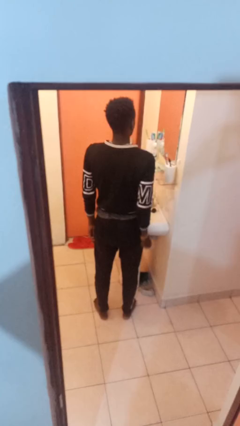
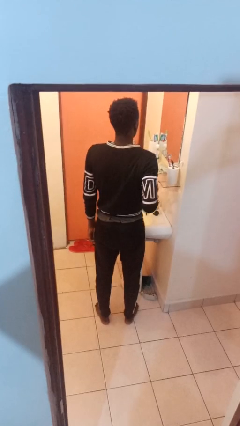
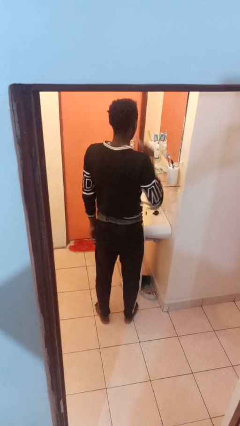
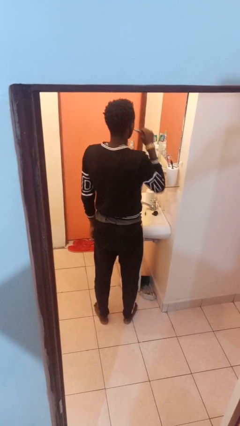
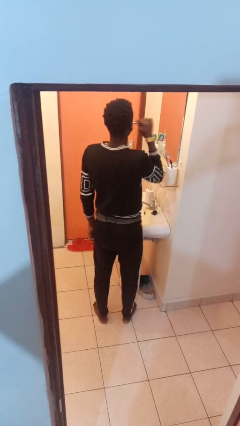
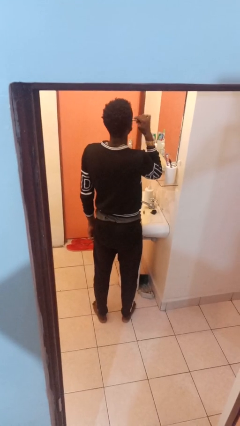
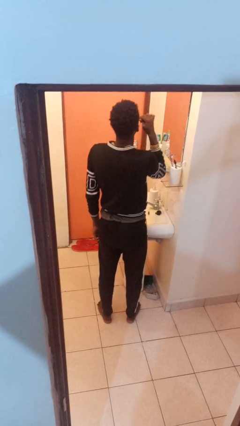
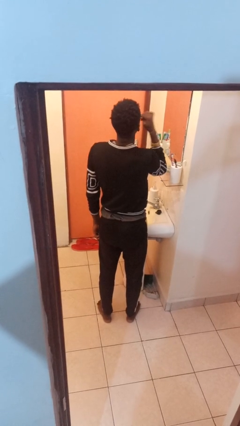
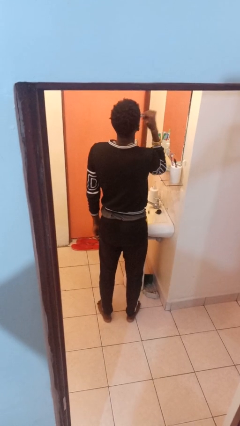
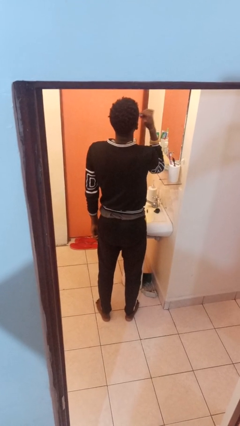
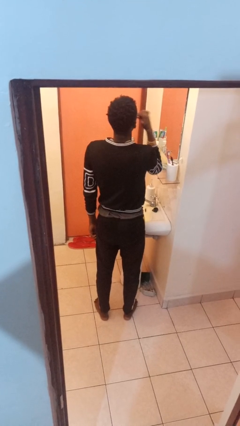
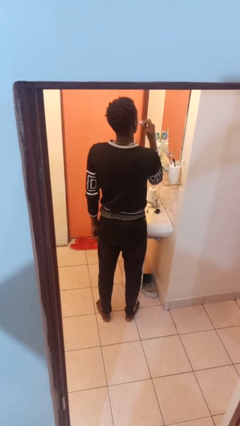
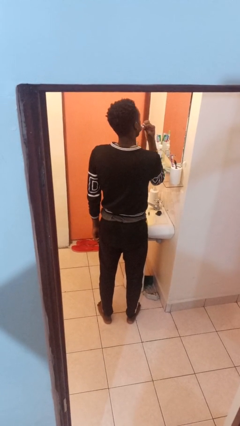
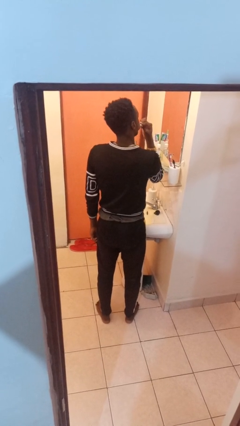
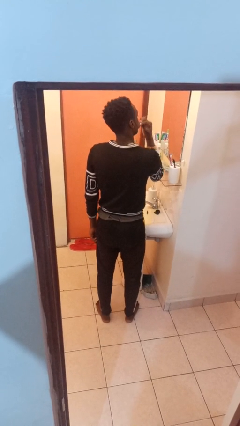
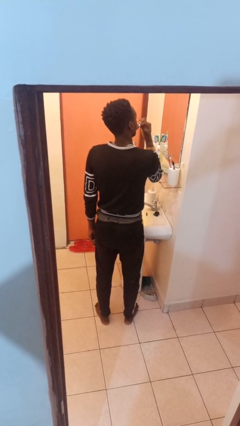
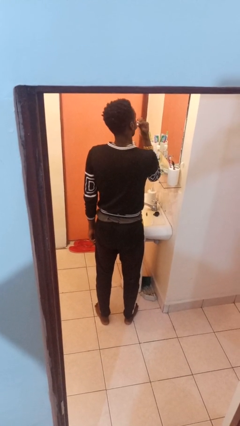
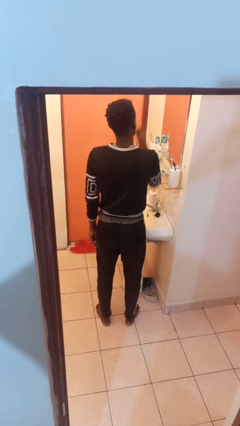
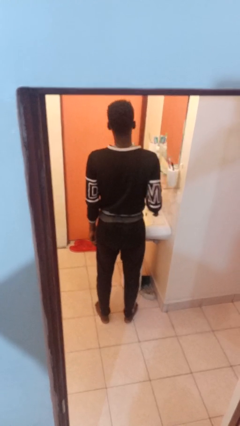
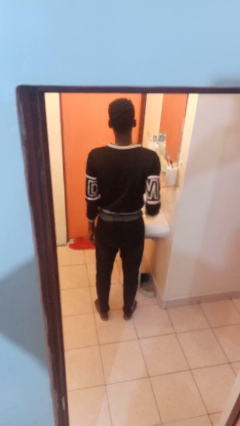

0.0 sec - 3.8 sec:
person brushes teeth

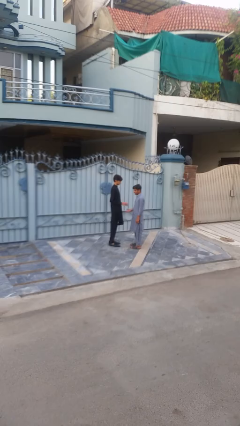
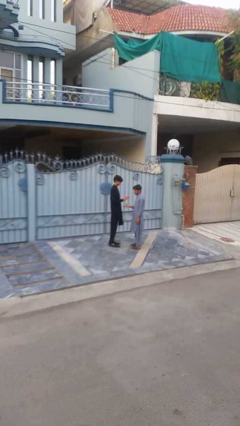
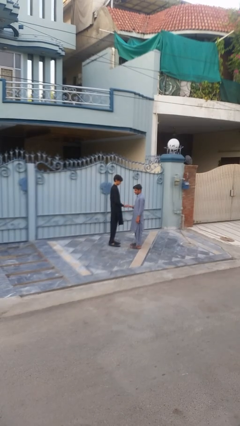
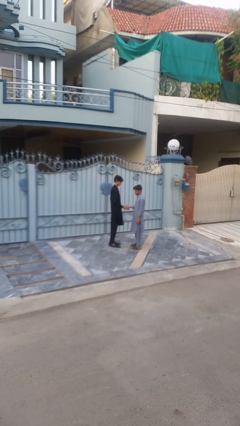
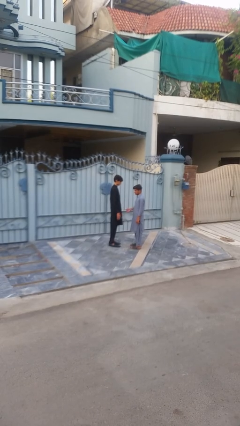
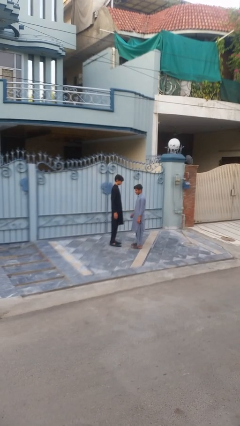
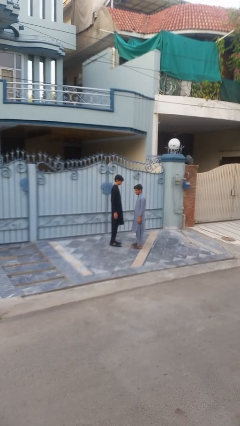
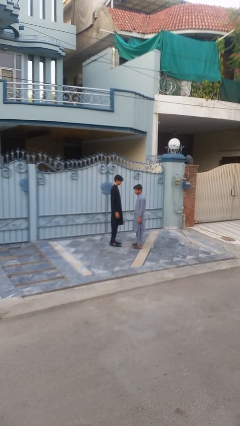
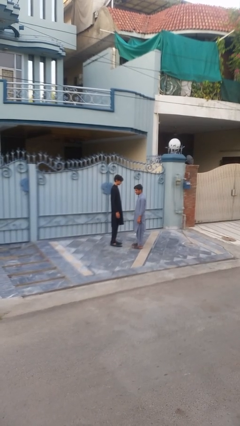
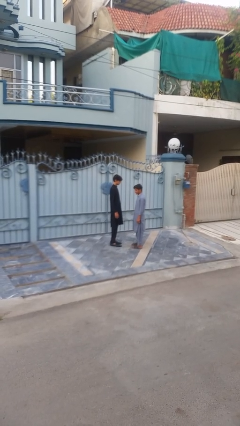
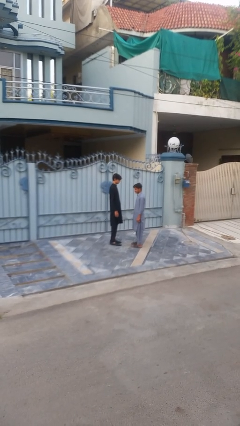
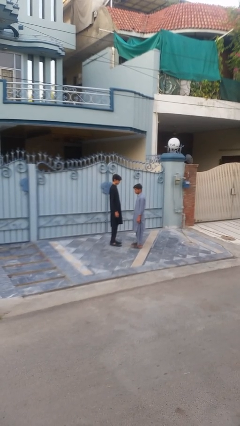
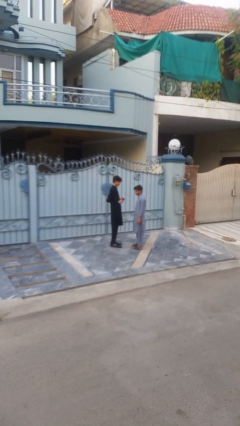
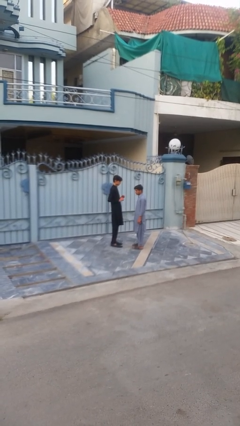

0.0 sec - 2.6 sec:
person highfives hand

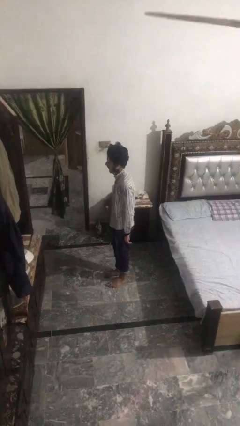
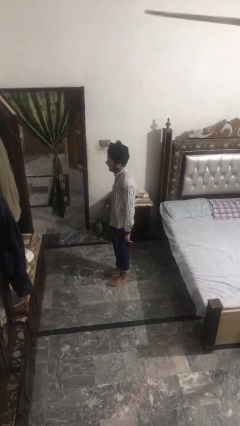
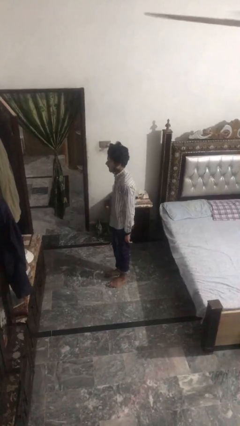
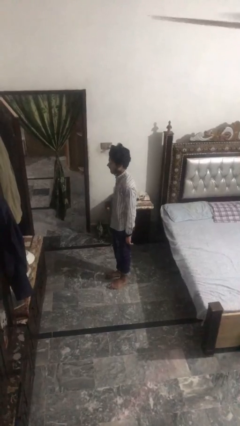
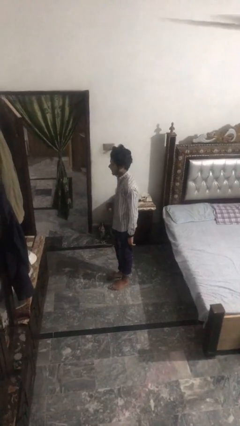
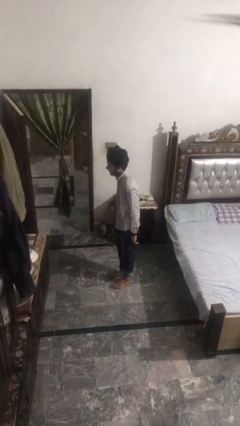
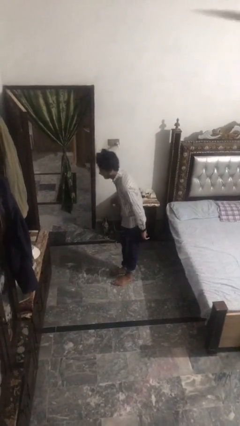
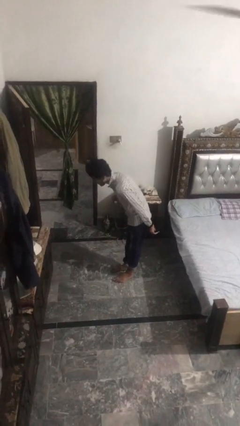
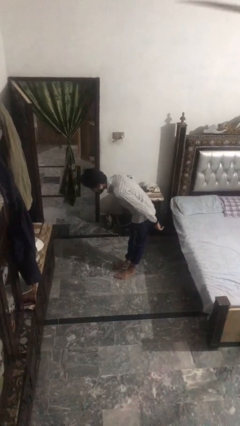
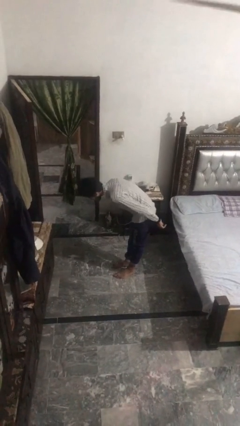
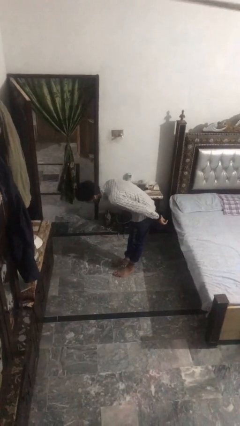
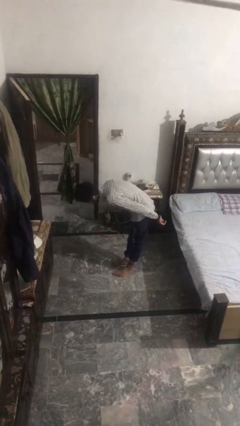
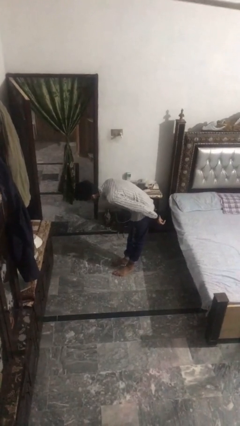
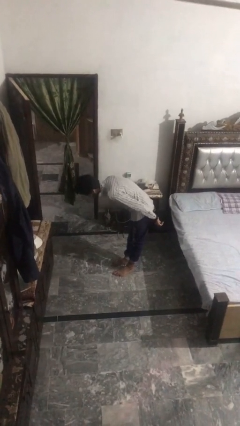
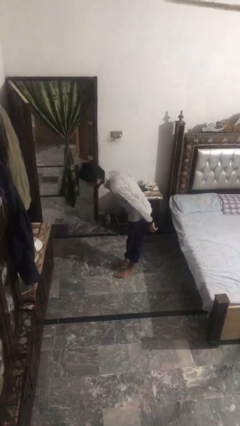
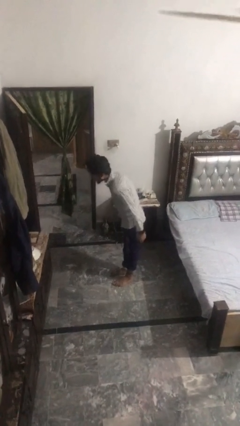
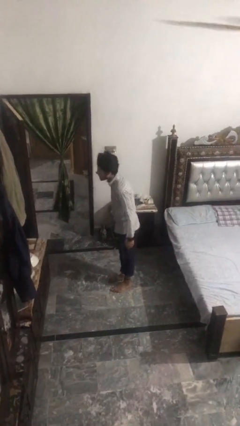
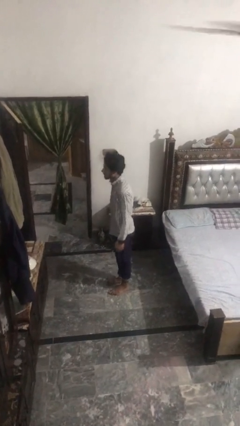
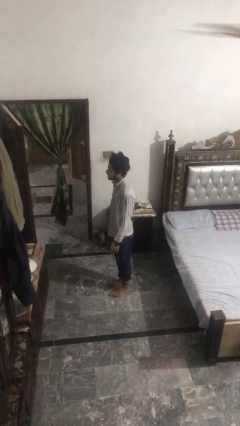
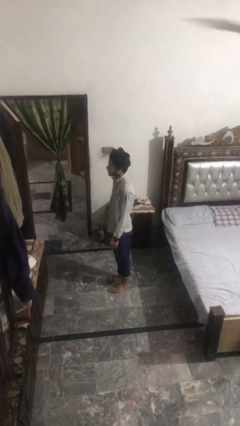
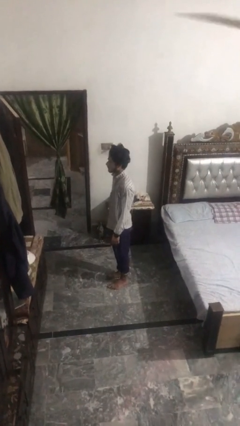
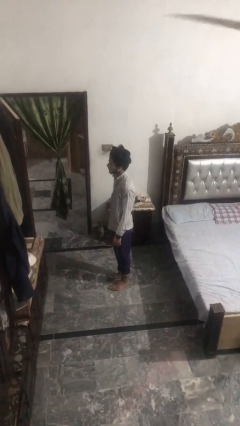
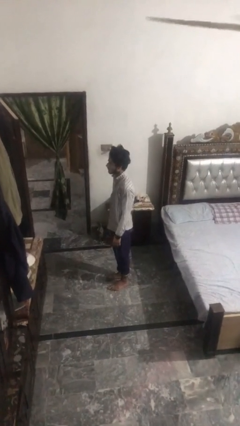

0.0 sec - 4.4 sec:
person bows

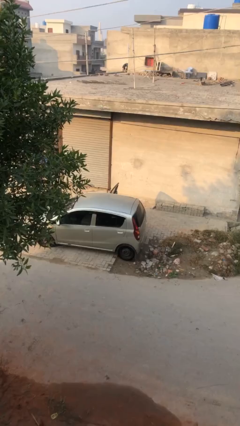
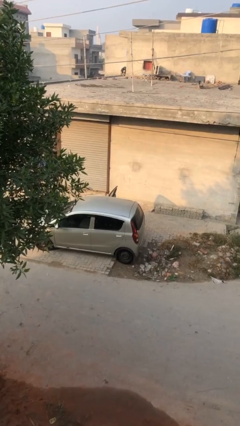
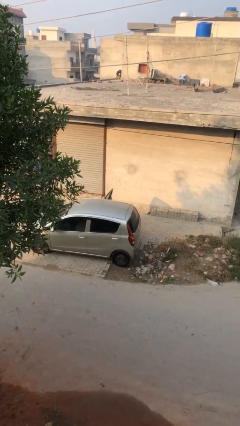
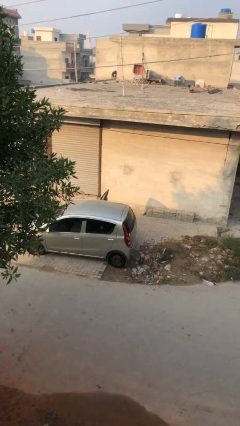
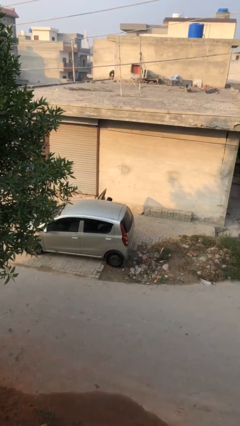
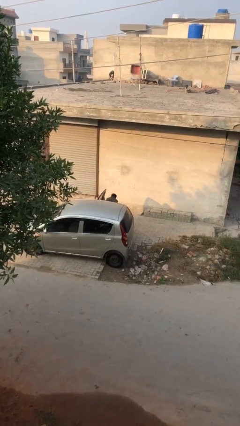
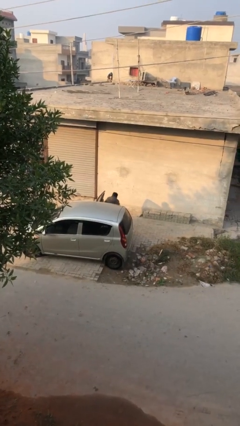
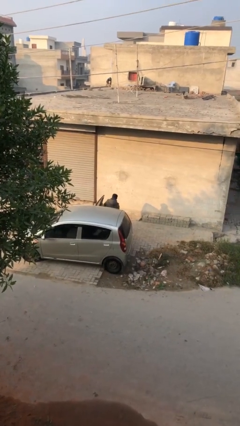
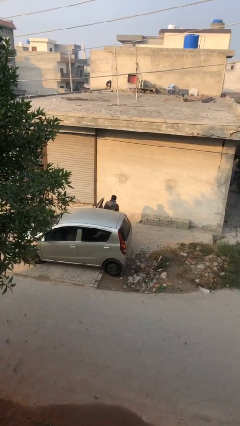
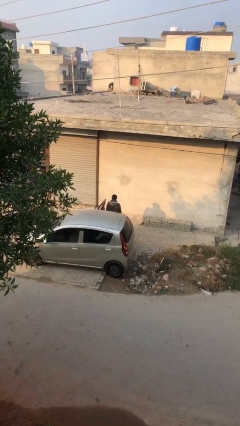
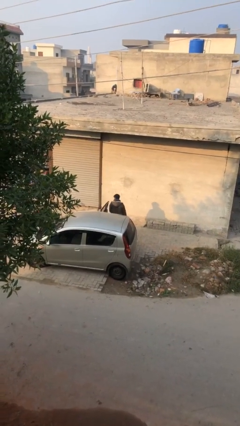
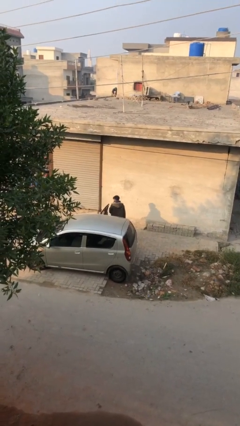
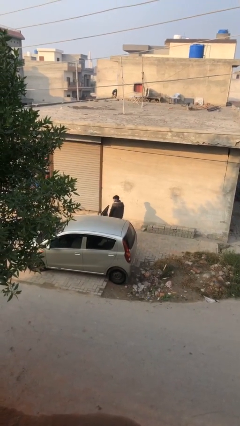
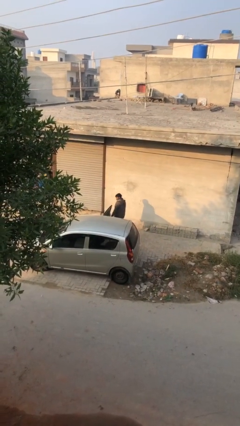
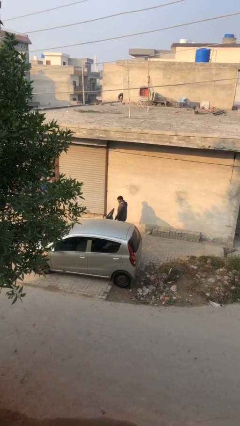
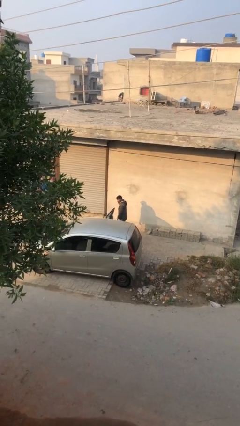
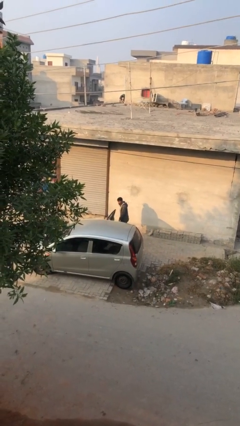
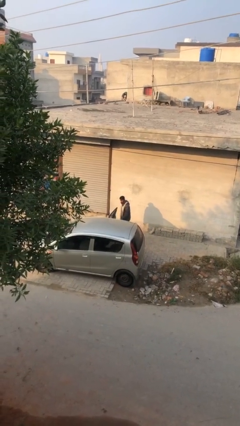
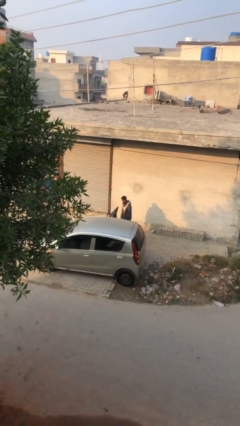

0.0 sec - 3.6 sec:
person exits car

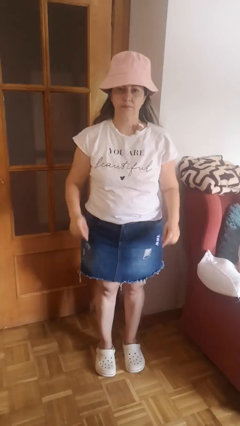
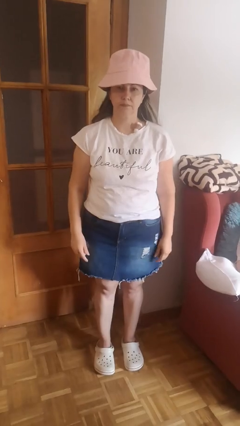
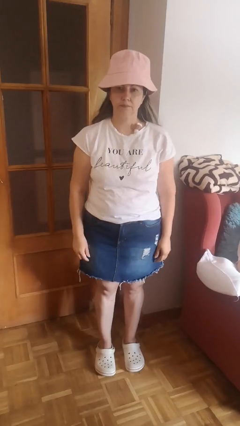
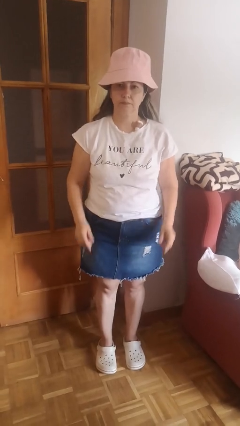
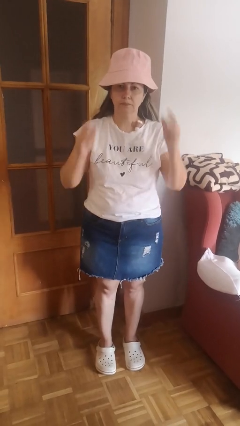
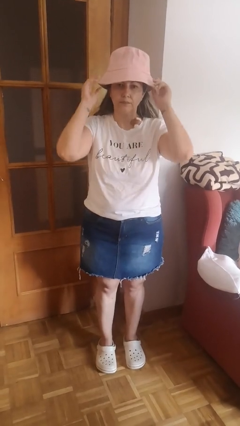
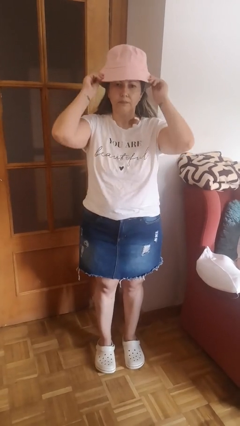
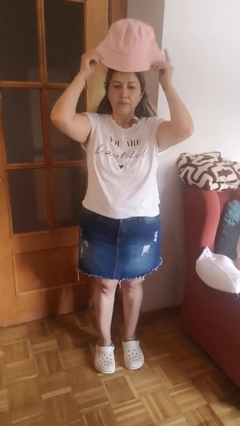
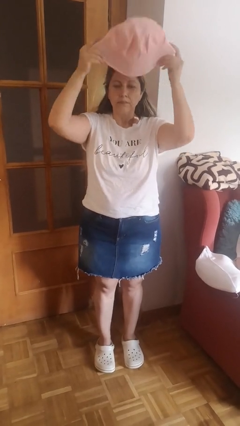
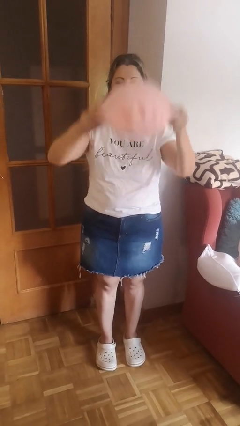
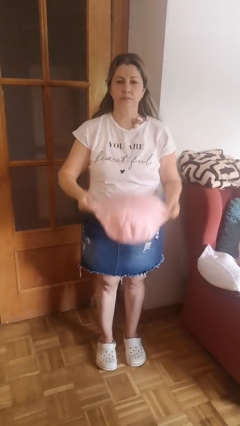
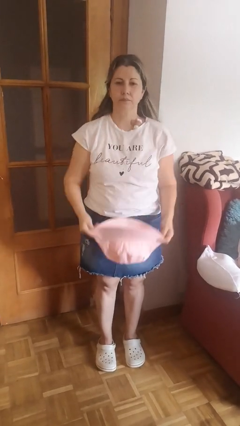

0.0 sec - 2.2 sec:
person takes off hat

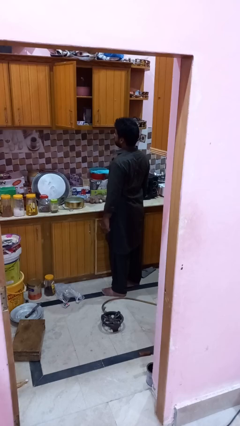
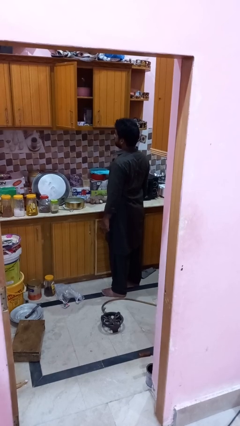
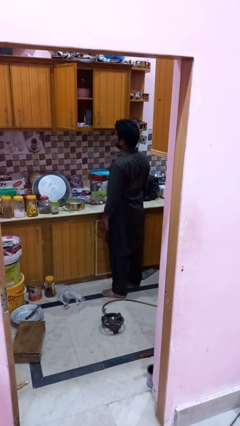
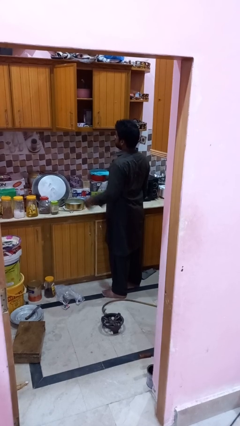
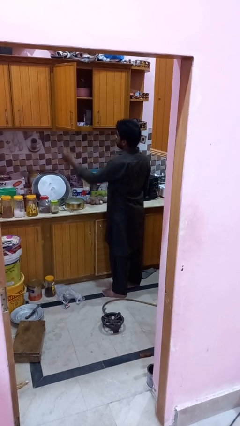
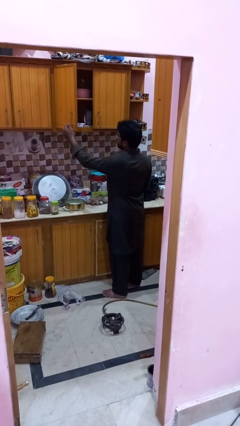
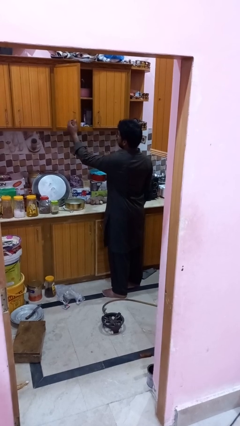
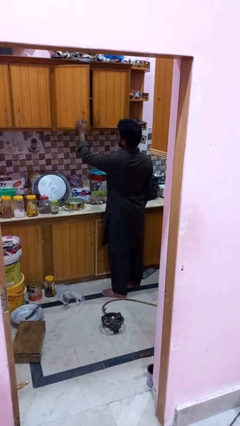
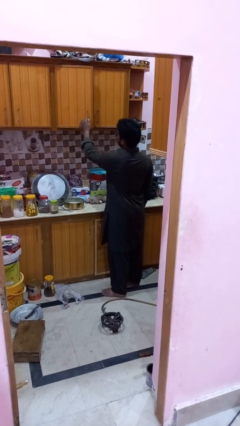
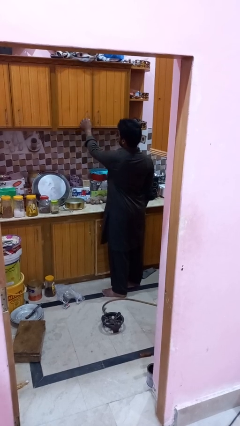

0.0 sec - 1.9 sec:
person closes cabinet
